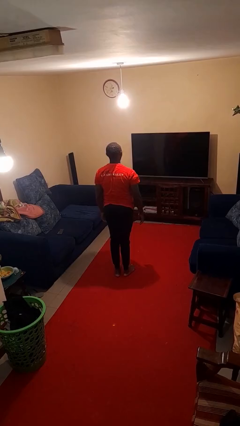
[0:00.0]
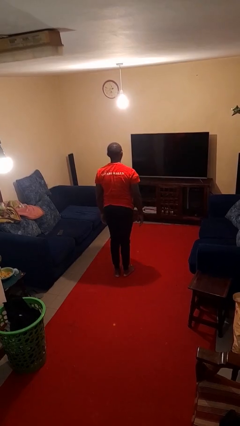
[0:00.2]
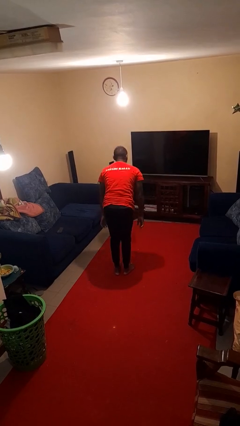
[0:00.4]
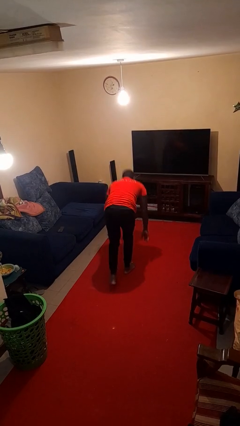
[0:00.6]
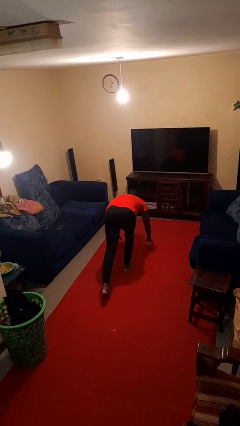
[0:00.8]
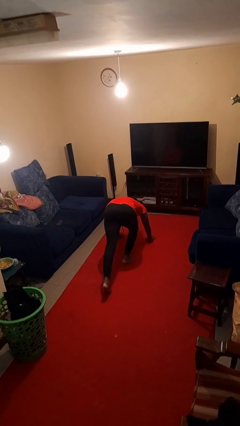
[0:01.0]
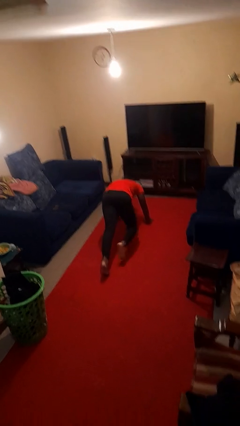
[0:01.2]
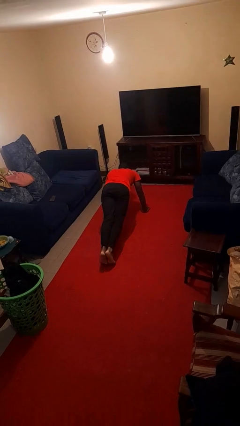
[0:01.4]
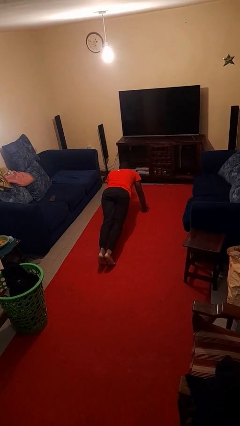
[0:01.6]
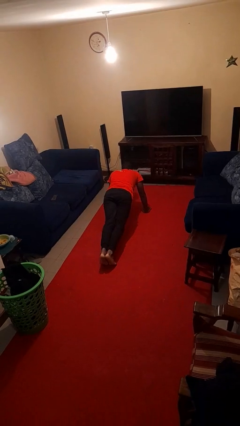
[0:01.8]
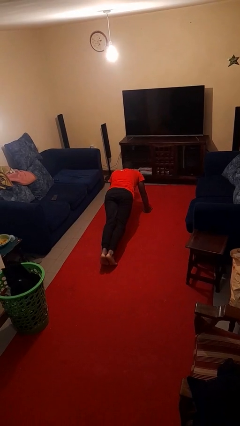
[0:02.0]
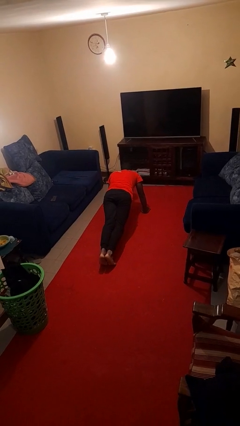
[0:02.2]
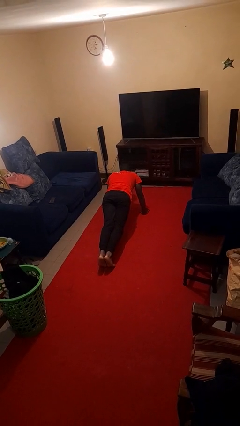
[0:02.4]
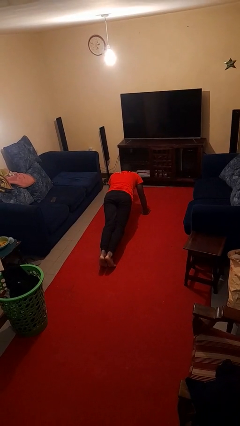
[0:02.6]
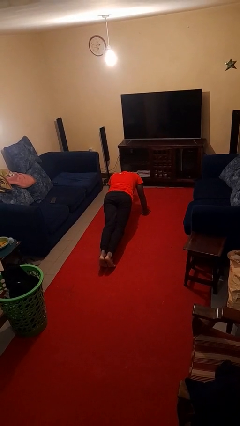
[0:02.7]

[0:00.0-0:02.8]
person exercises with plank

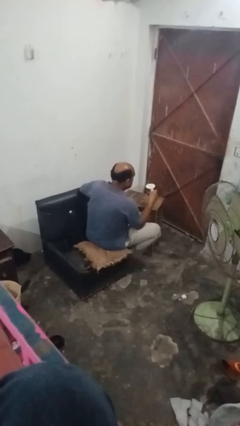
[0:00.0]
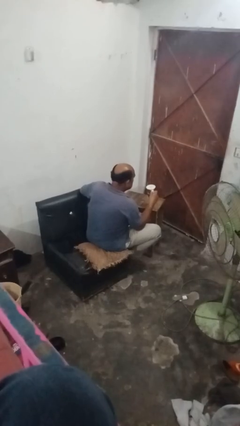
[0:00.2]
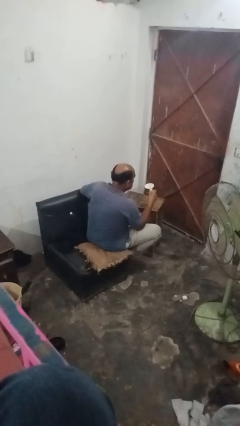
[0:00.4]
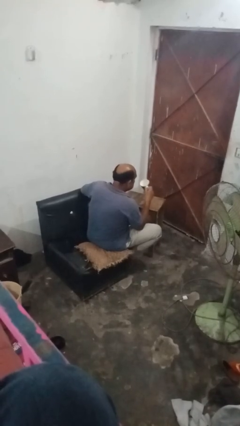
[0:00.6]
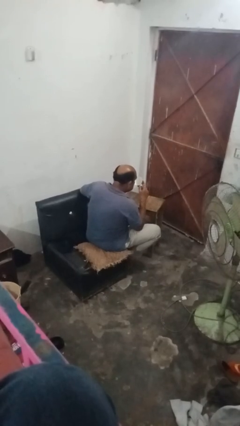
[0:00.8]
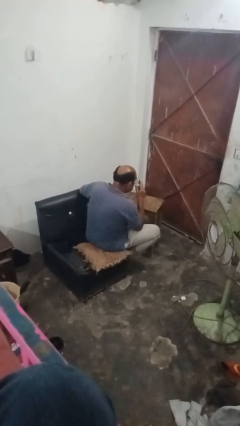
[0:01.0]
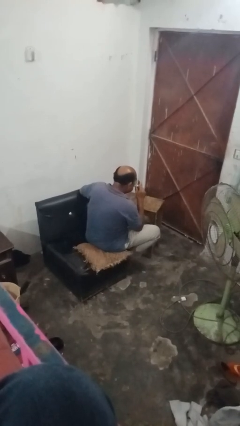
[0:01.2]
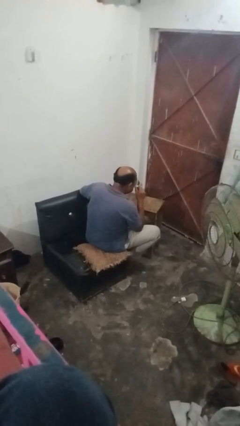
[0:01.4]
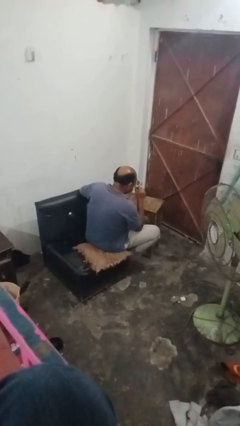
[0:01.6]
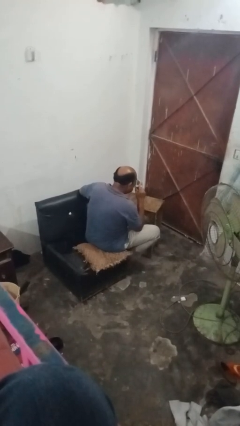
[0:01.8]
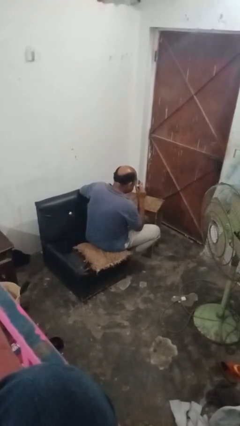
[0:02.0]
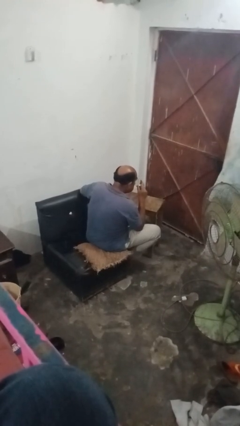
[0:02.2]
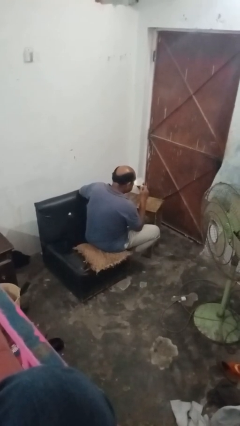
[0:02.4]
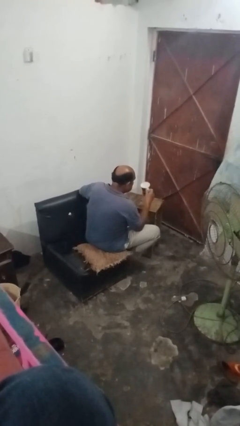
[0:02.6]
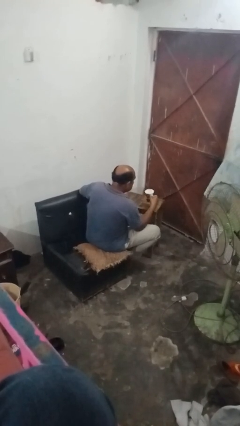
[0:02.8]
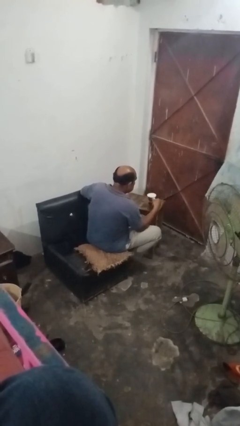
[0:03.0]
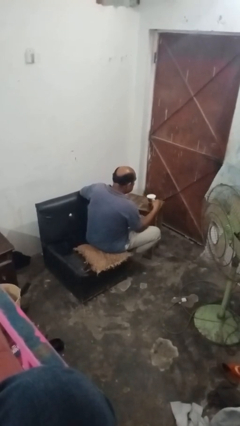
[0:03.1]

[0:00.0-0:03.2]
person drinks from mug

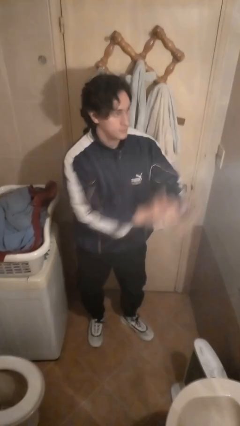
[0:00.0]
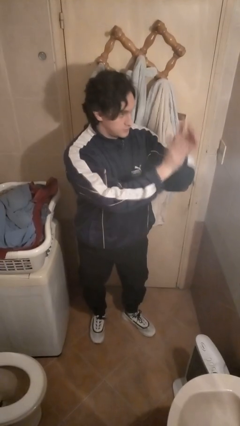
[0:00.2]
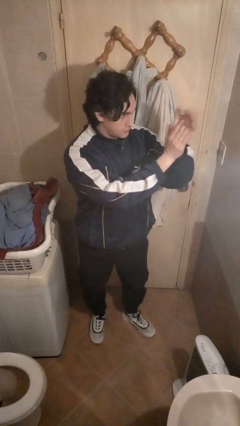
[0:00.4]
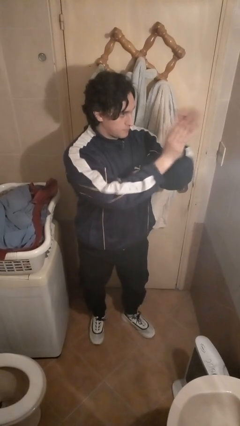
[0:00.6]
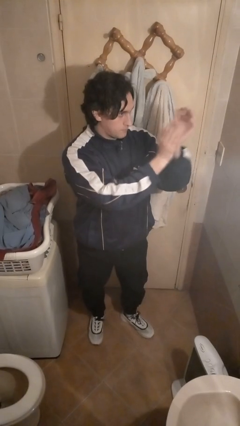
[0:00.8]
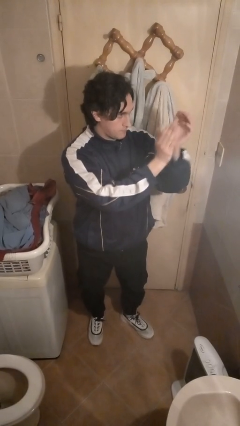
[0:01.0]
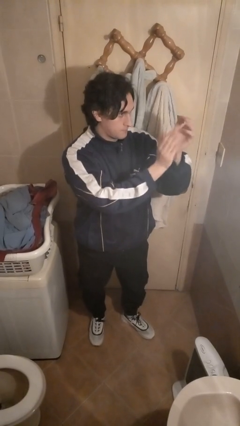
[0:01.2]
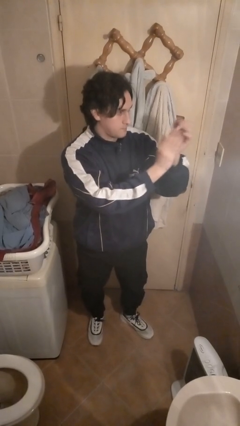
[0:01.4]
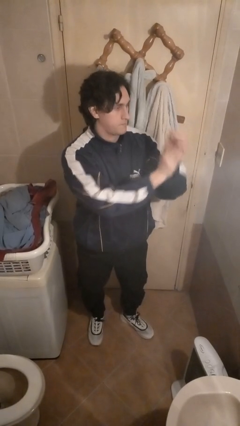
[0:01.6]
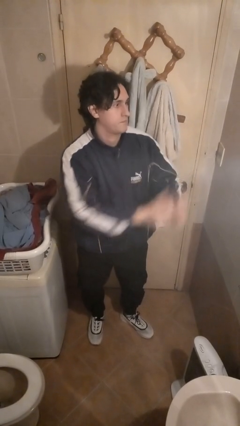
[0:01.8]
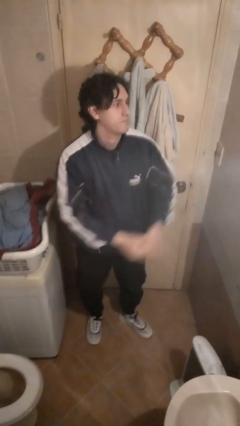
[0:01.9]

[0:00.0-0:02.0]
person claps hands

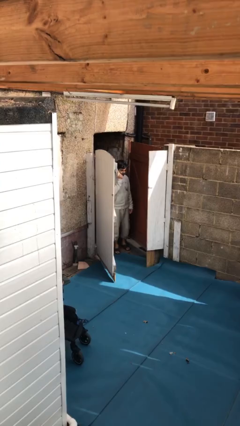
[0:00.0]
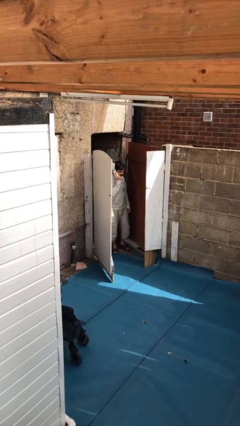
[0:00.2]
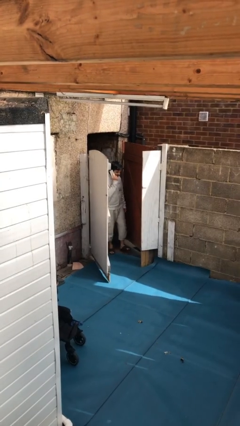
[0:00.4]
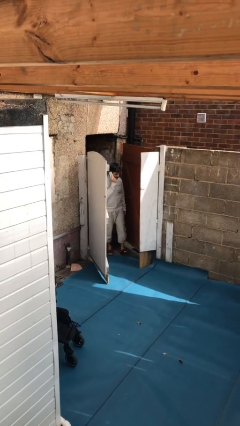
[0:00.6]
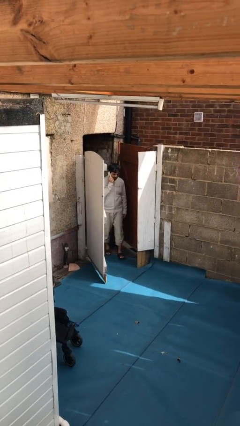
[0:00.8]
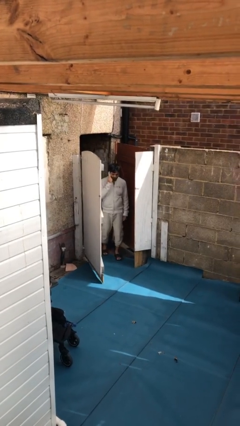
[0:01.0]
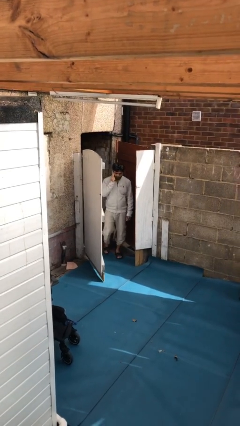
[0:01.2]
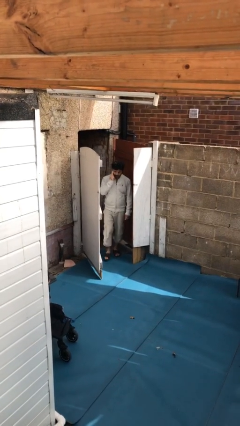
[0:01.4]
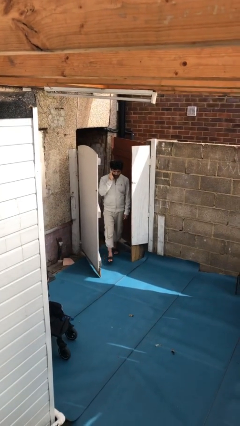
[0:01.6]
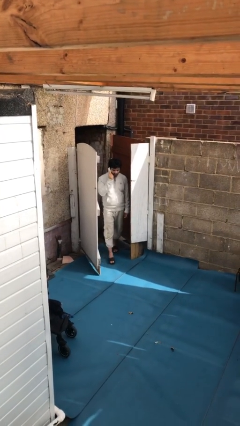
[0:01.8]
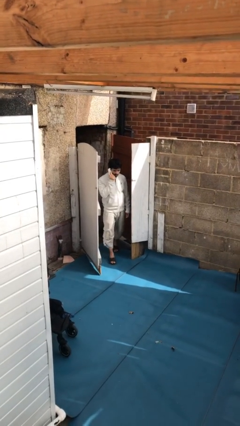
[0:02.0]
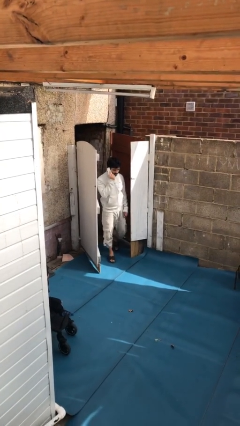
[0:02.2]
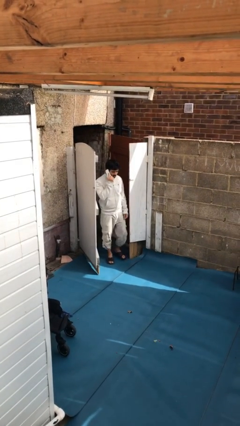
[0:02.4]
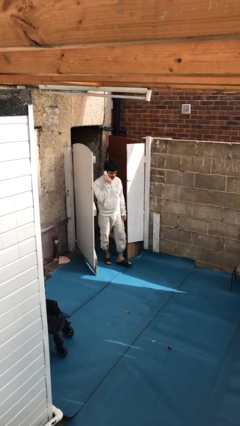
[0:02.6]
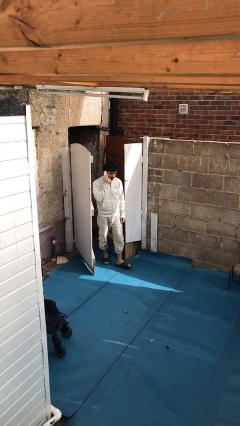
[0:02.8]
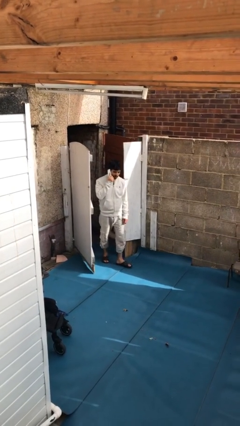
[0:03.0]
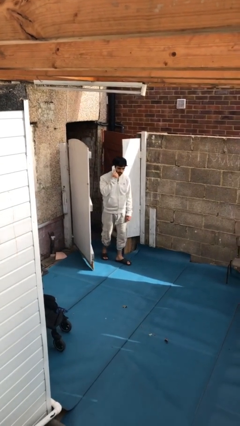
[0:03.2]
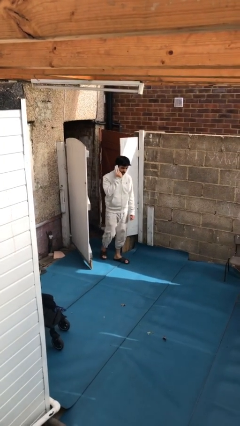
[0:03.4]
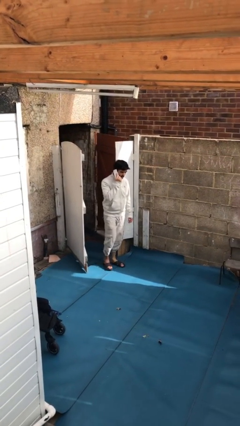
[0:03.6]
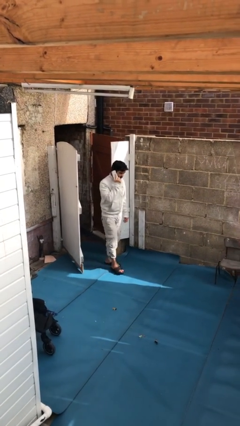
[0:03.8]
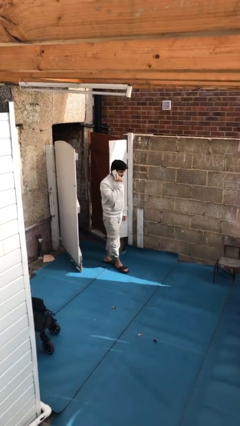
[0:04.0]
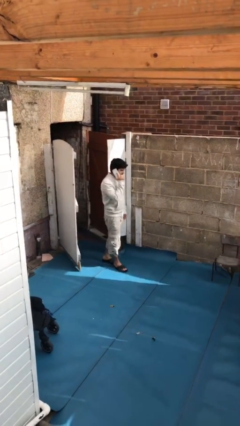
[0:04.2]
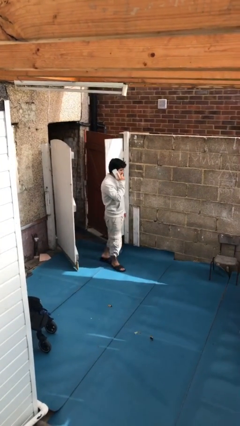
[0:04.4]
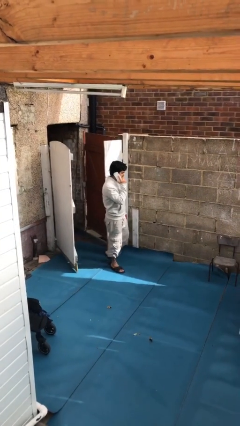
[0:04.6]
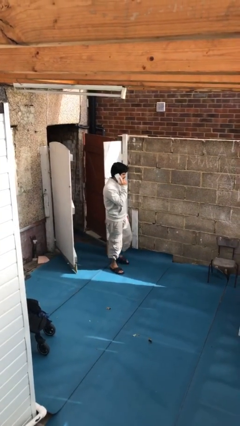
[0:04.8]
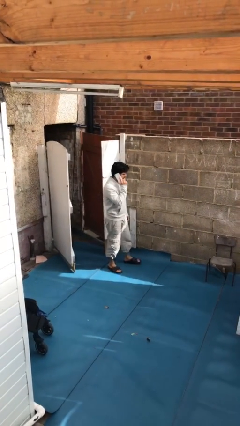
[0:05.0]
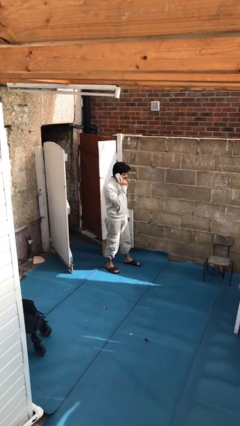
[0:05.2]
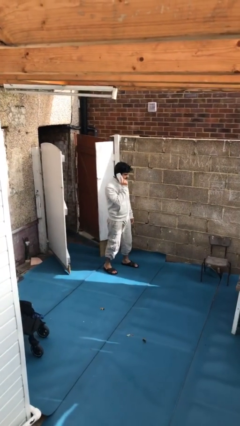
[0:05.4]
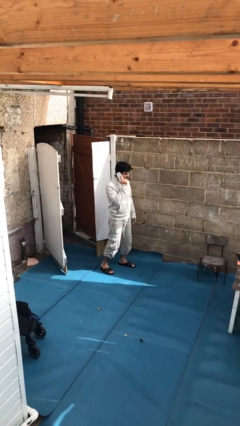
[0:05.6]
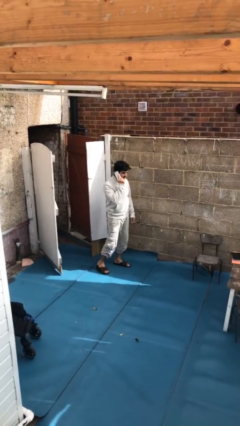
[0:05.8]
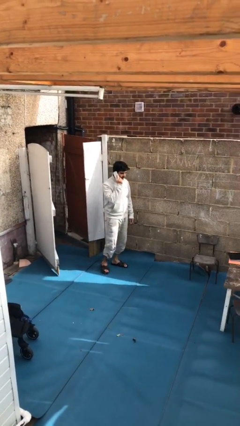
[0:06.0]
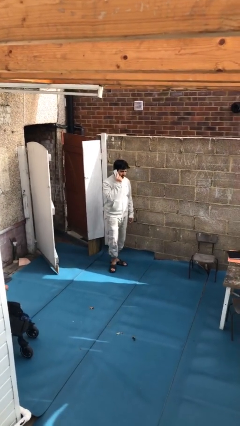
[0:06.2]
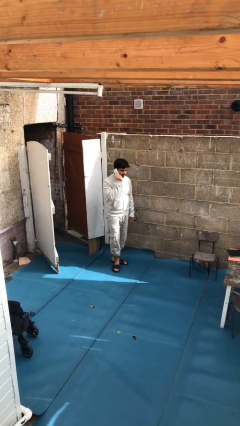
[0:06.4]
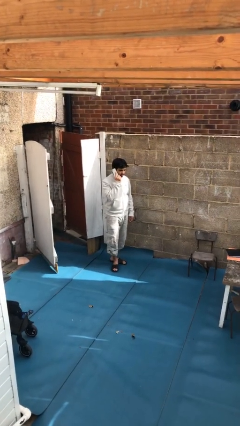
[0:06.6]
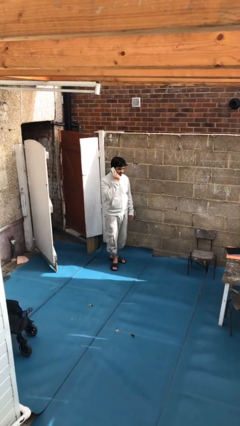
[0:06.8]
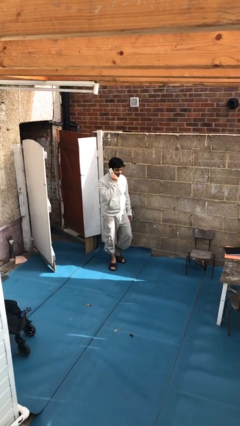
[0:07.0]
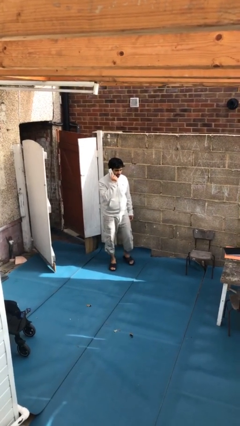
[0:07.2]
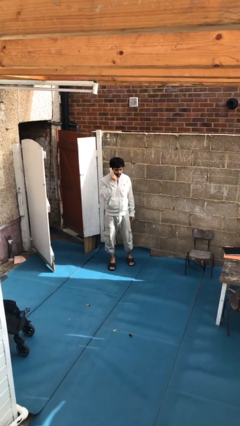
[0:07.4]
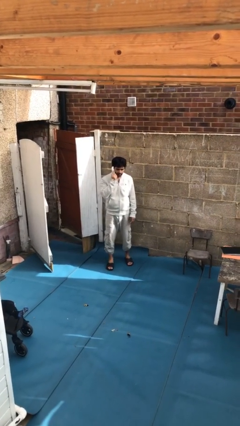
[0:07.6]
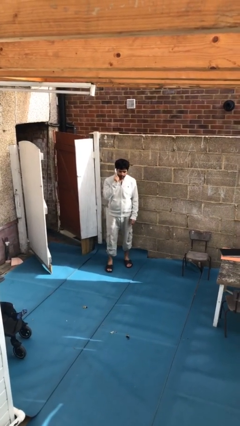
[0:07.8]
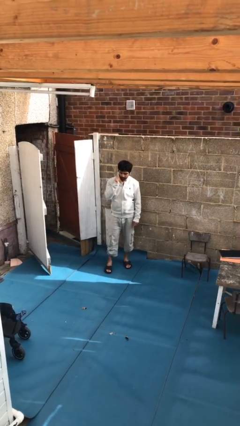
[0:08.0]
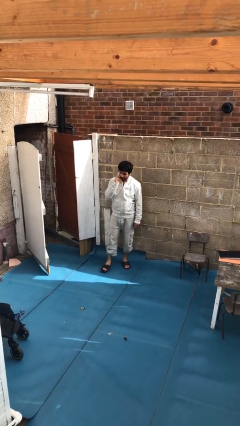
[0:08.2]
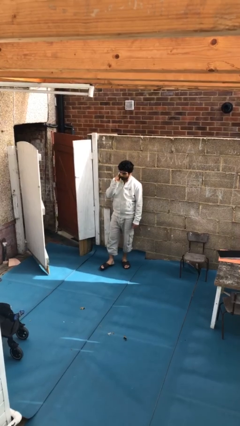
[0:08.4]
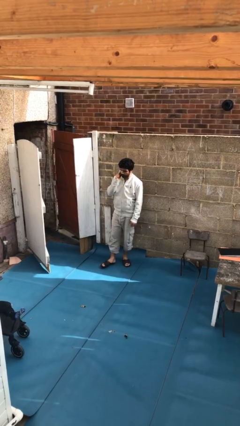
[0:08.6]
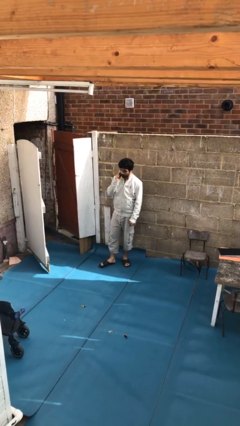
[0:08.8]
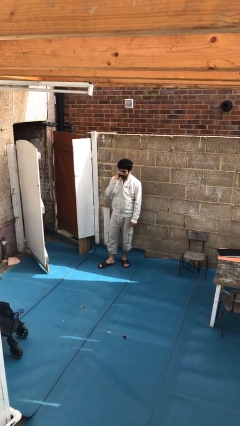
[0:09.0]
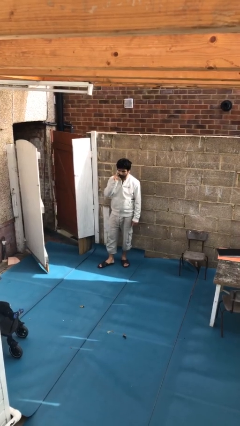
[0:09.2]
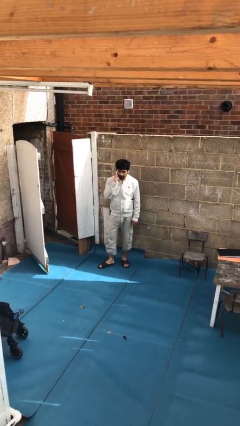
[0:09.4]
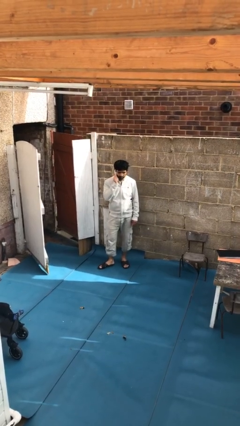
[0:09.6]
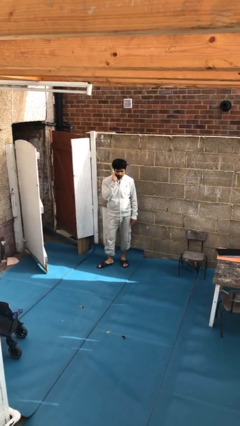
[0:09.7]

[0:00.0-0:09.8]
person enters scene through structure
